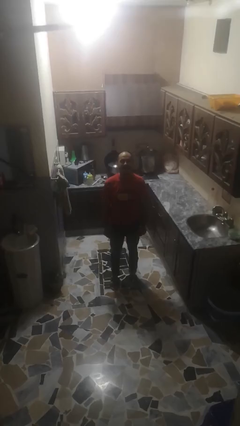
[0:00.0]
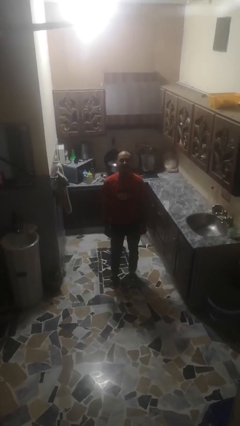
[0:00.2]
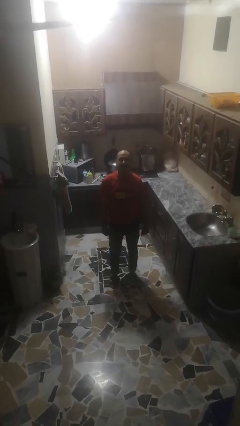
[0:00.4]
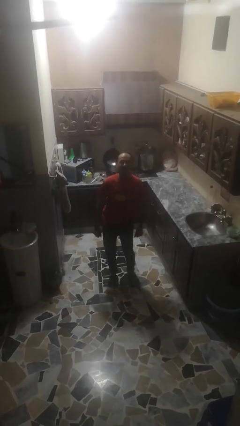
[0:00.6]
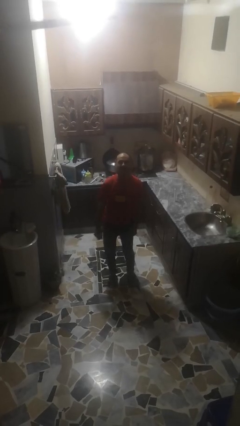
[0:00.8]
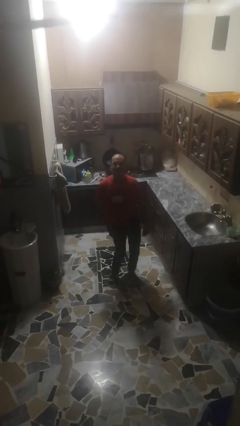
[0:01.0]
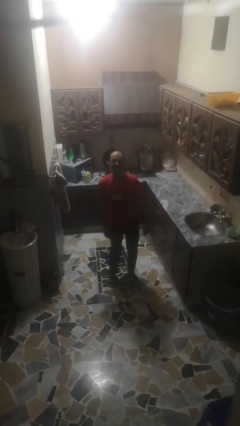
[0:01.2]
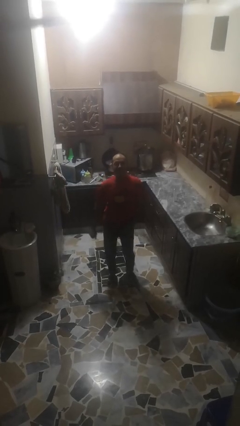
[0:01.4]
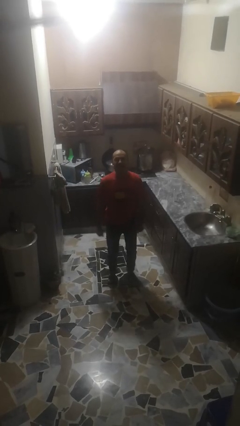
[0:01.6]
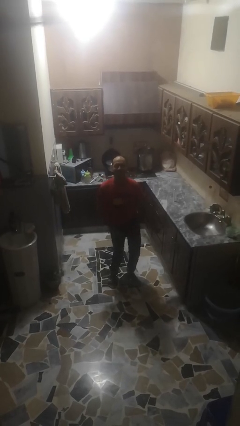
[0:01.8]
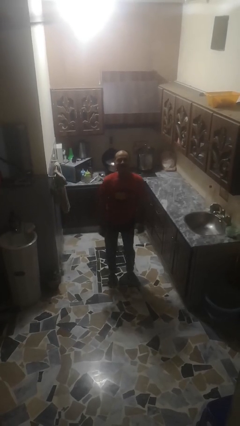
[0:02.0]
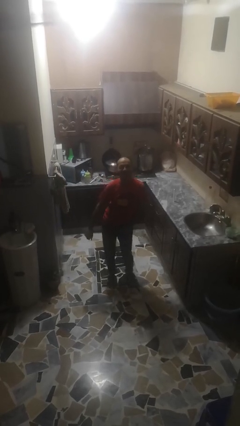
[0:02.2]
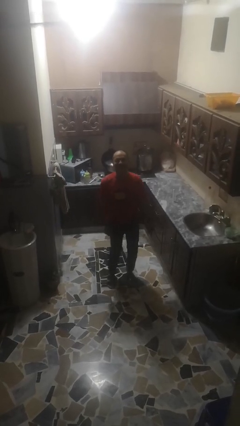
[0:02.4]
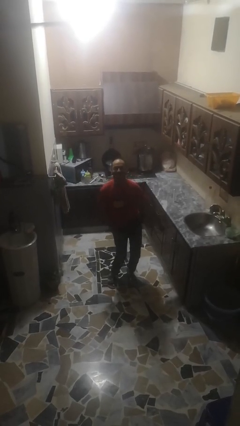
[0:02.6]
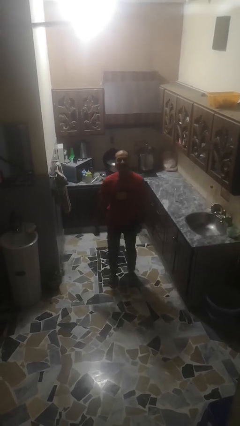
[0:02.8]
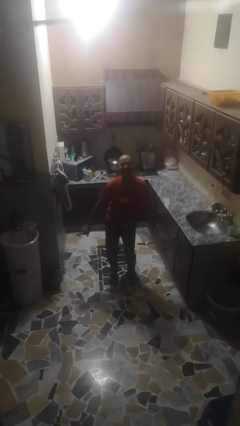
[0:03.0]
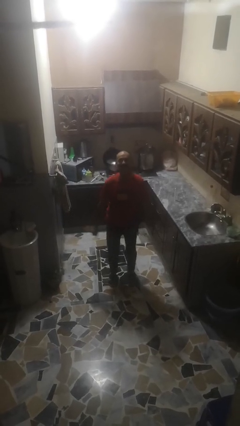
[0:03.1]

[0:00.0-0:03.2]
person wiggles hips

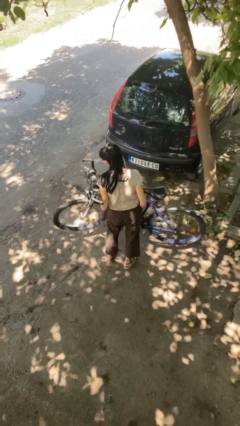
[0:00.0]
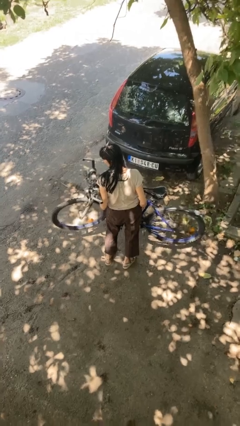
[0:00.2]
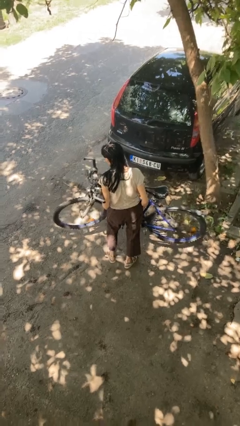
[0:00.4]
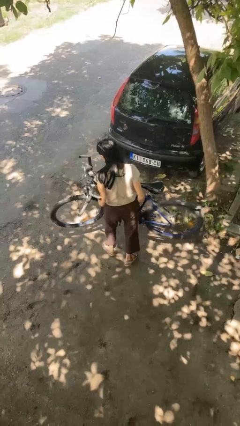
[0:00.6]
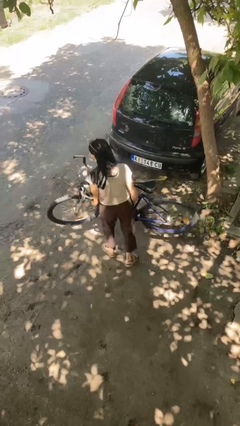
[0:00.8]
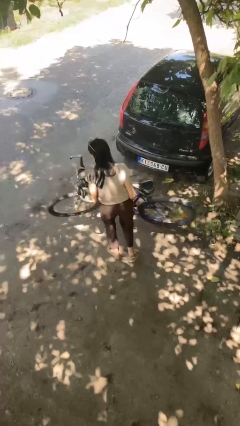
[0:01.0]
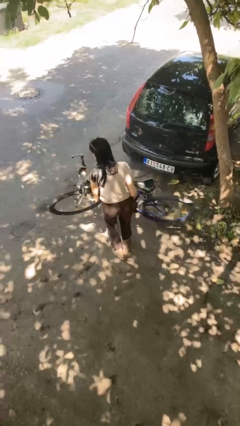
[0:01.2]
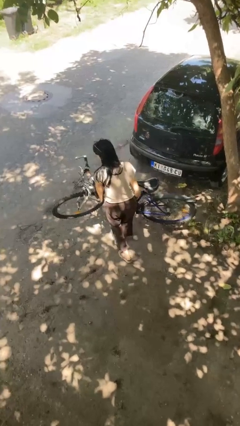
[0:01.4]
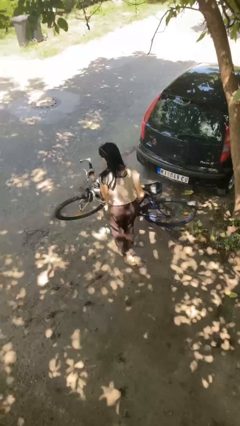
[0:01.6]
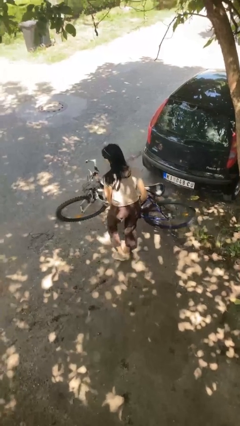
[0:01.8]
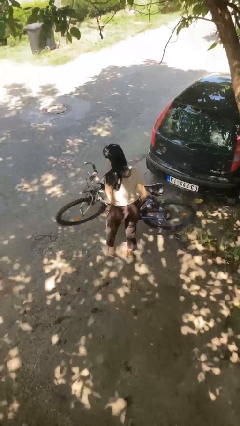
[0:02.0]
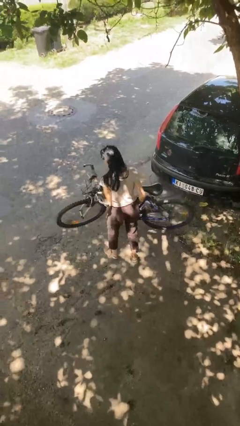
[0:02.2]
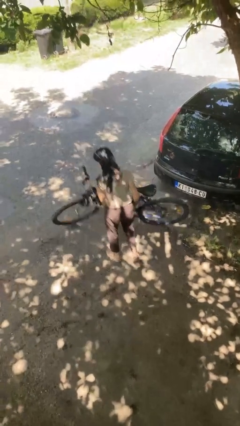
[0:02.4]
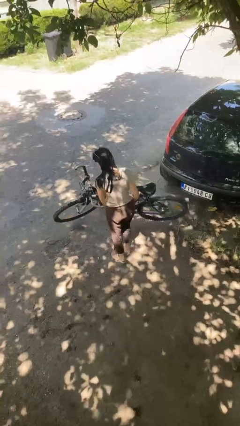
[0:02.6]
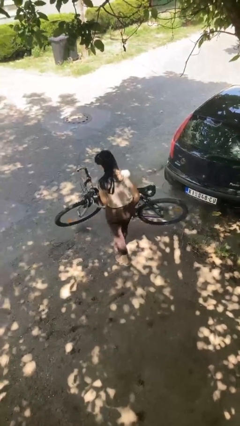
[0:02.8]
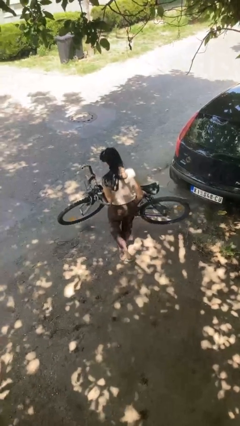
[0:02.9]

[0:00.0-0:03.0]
person carries bicycle

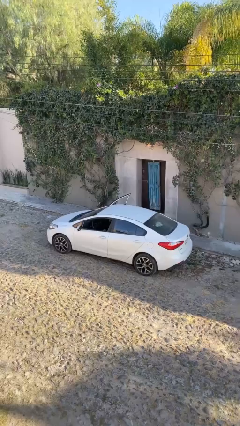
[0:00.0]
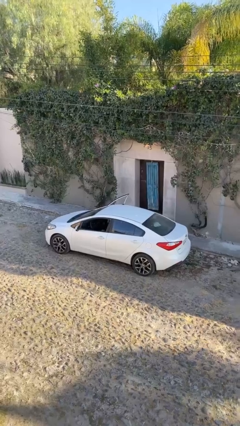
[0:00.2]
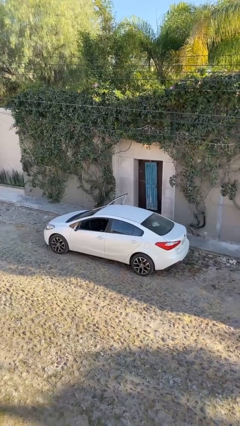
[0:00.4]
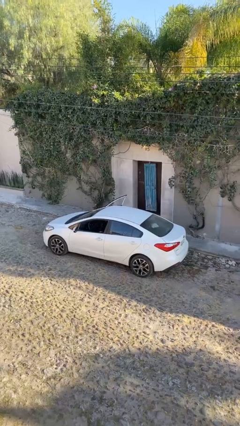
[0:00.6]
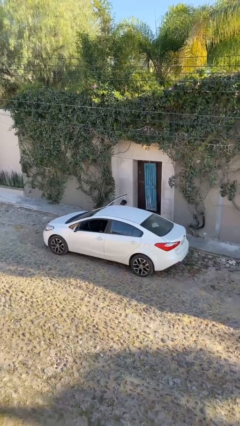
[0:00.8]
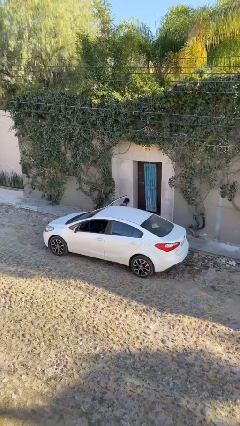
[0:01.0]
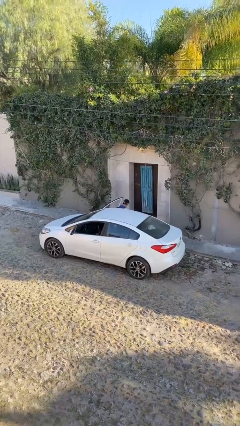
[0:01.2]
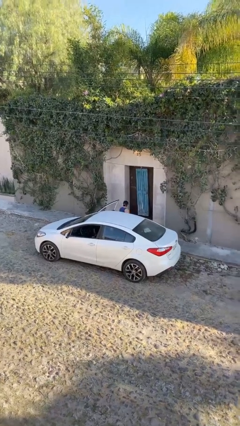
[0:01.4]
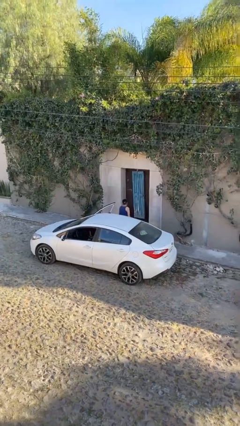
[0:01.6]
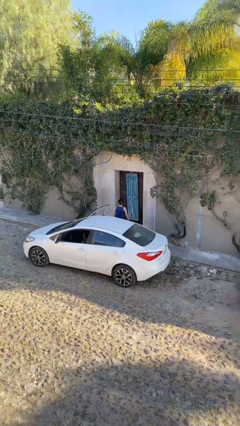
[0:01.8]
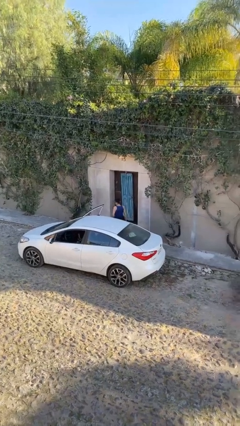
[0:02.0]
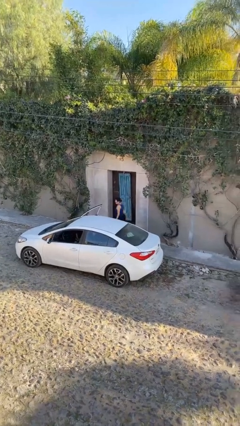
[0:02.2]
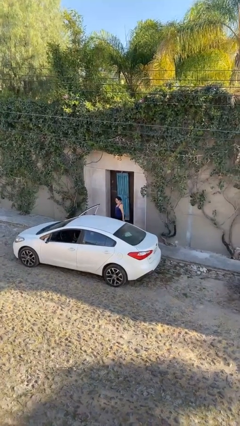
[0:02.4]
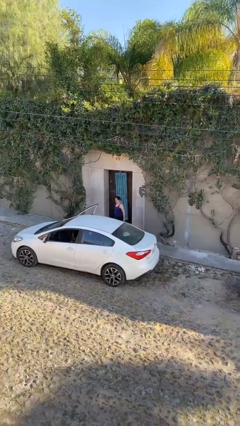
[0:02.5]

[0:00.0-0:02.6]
person exits car

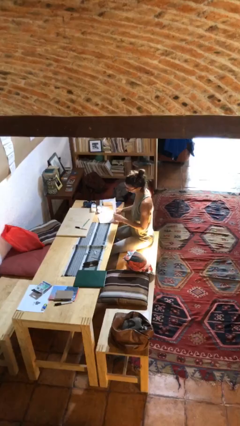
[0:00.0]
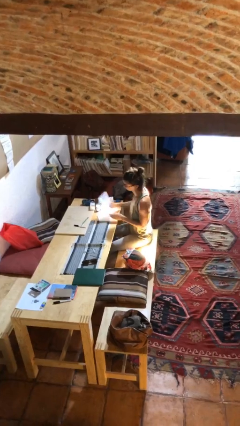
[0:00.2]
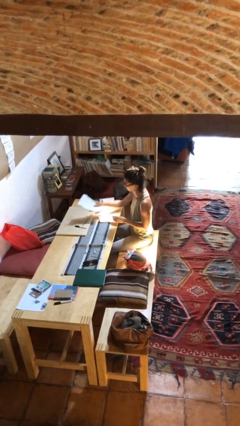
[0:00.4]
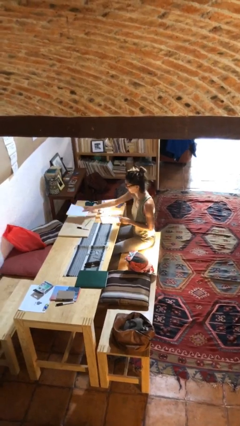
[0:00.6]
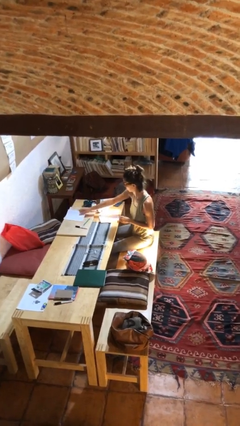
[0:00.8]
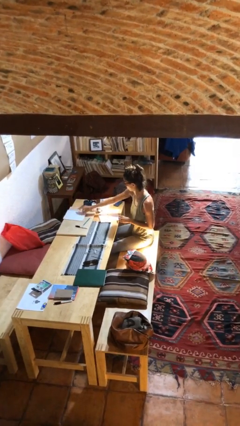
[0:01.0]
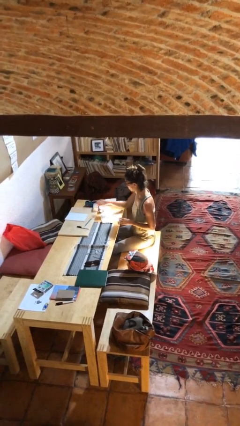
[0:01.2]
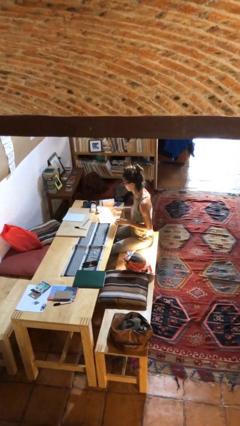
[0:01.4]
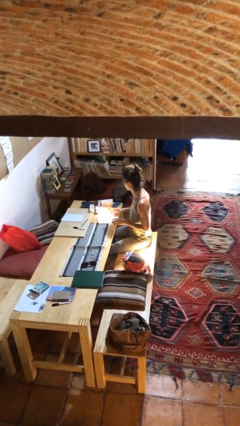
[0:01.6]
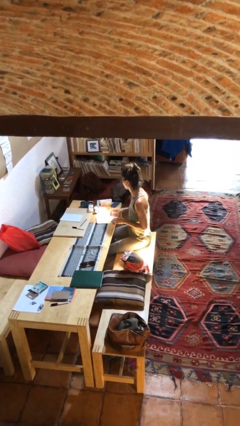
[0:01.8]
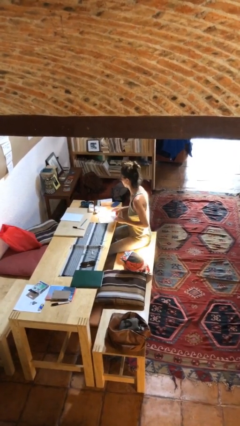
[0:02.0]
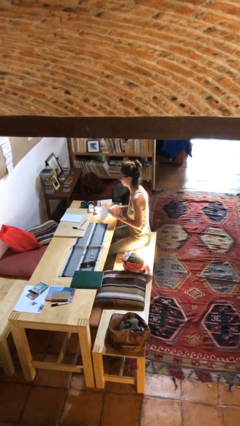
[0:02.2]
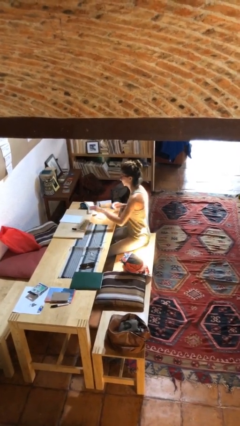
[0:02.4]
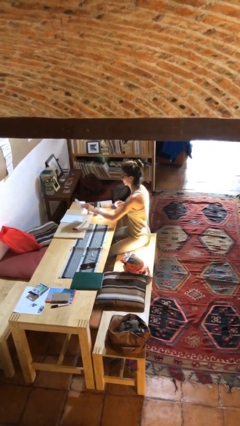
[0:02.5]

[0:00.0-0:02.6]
person puts down object on table

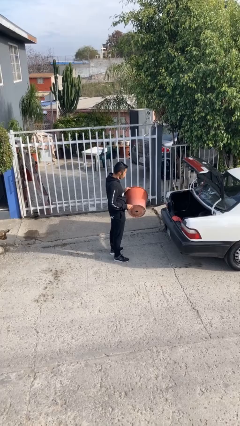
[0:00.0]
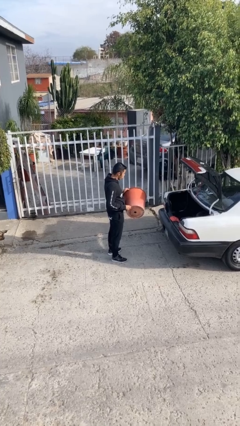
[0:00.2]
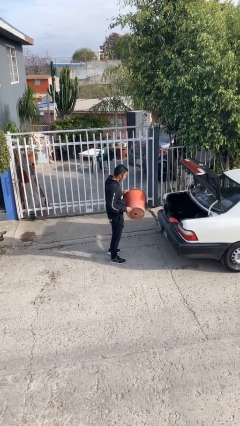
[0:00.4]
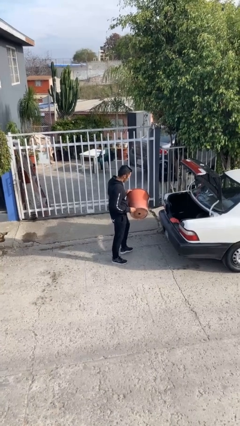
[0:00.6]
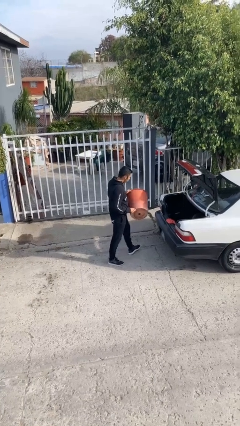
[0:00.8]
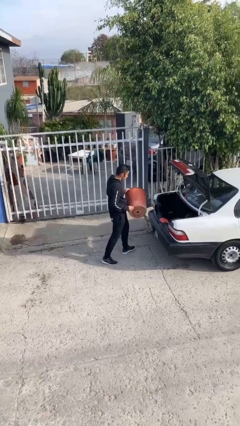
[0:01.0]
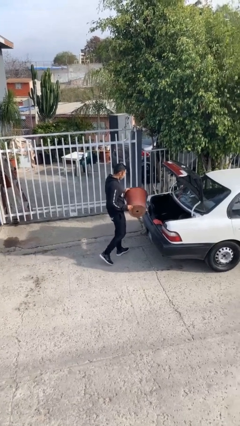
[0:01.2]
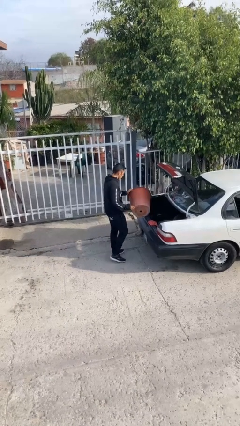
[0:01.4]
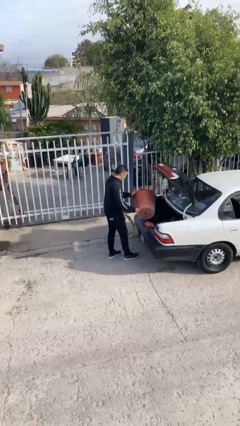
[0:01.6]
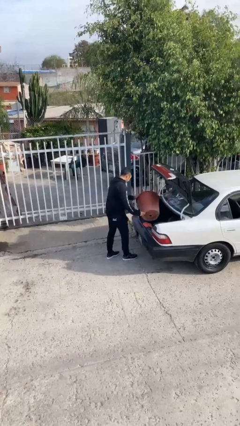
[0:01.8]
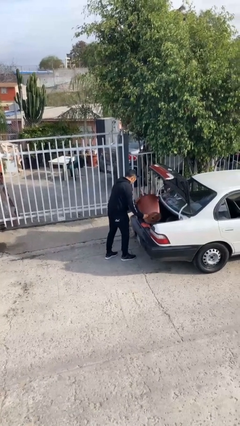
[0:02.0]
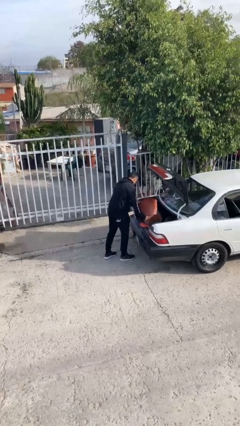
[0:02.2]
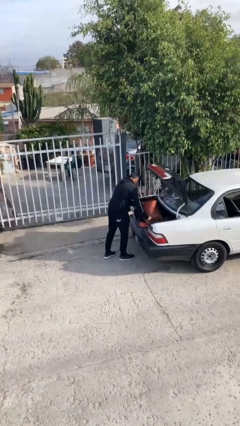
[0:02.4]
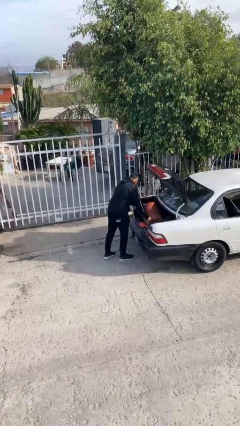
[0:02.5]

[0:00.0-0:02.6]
person loads car

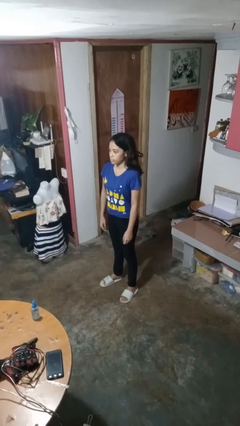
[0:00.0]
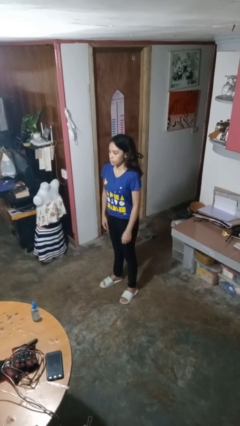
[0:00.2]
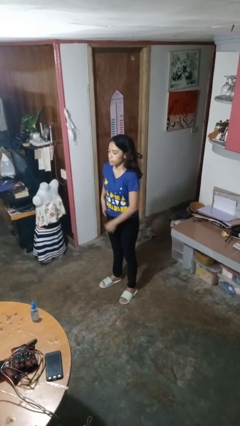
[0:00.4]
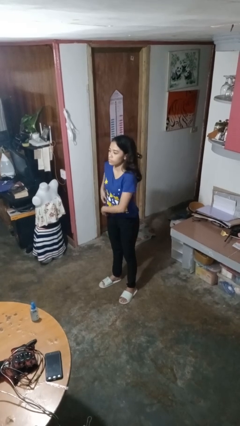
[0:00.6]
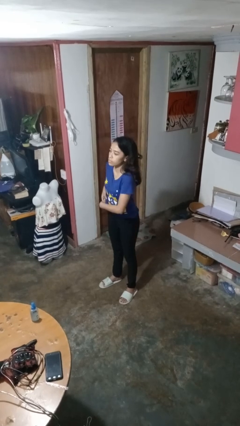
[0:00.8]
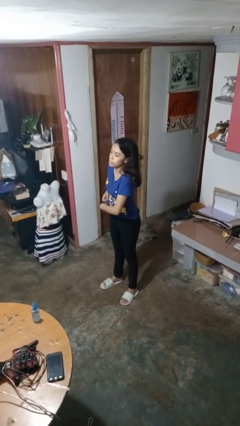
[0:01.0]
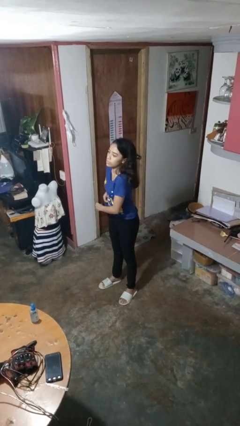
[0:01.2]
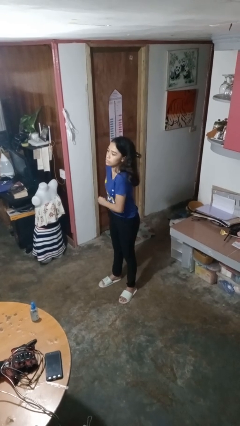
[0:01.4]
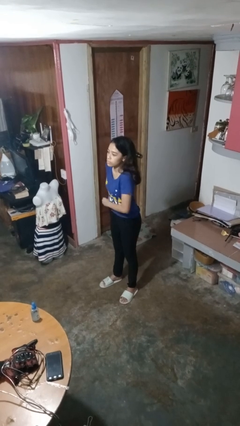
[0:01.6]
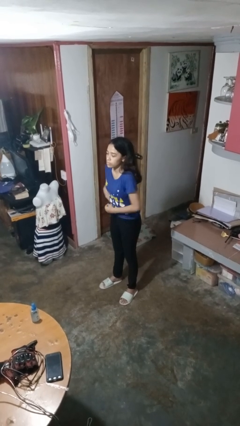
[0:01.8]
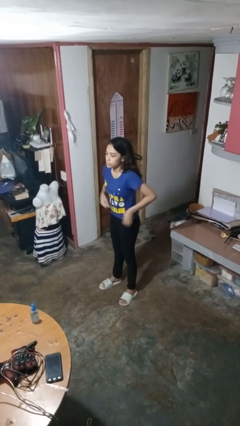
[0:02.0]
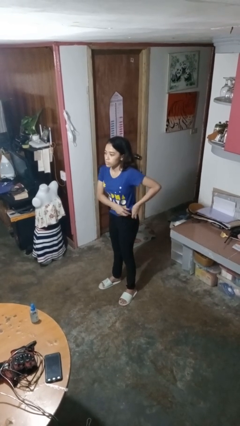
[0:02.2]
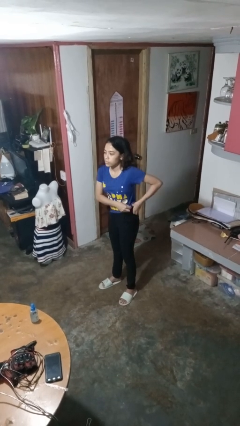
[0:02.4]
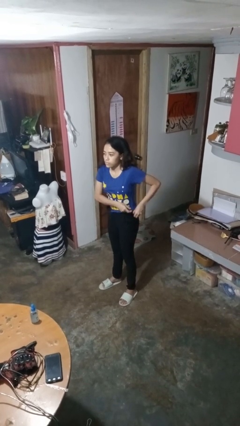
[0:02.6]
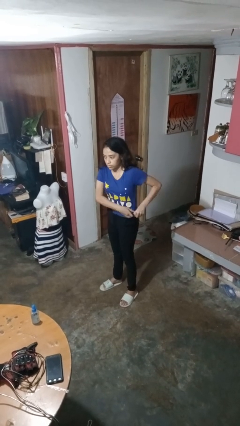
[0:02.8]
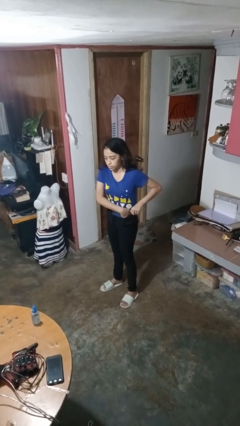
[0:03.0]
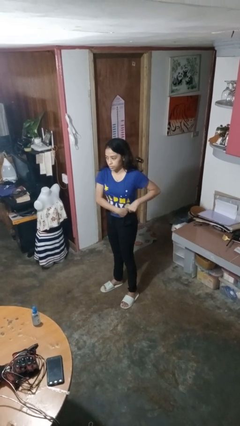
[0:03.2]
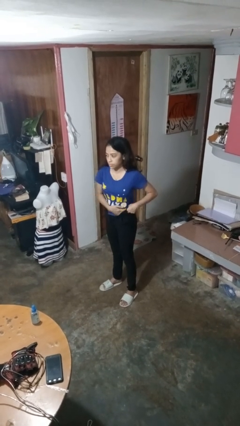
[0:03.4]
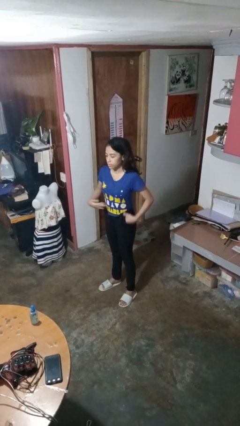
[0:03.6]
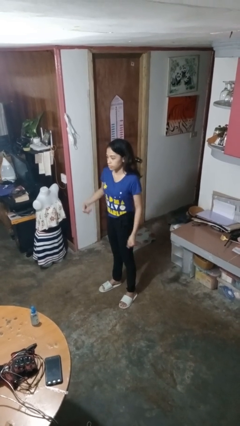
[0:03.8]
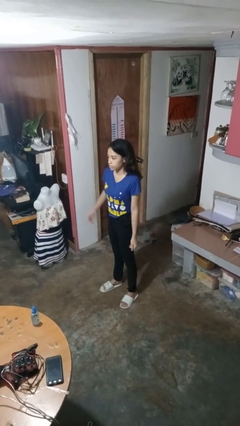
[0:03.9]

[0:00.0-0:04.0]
person tucks in shirt
